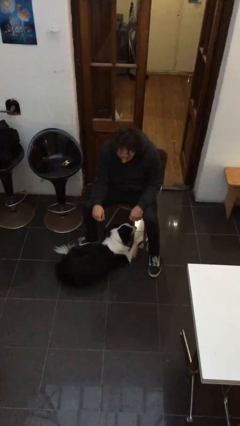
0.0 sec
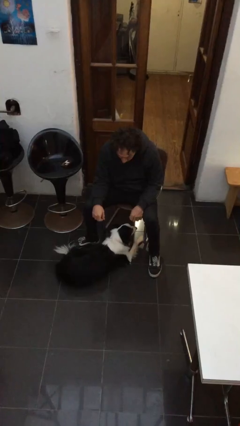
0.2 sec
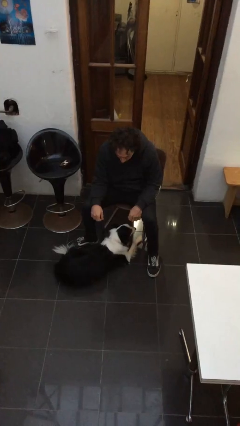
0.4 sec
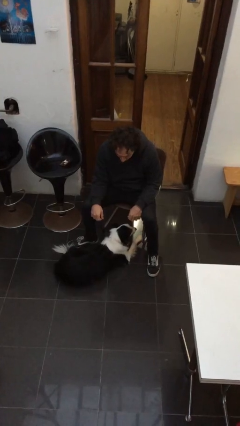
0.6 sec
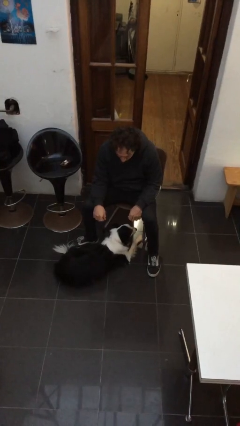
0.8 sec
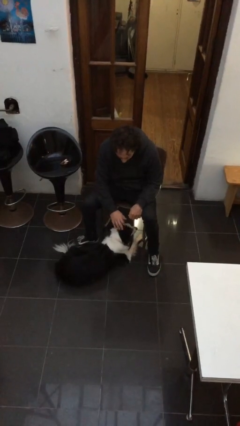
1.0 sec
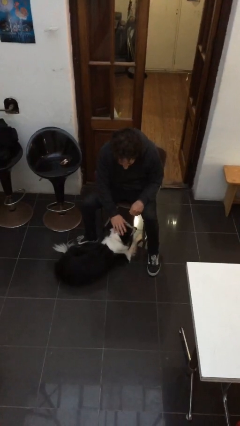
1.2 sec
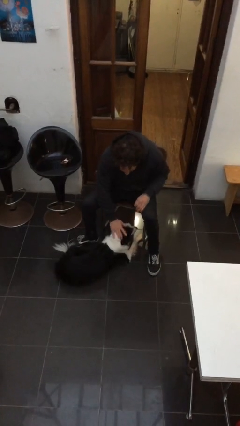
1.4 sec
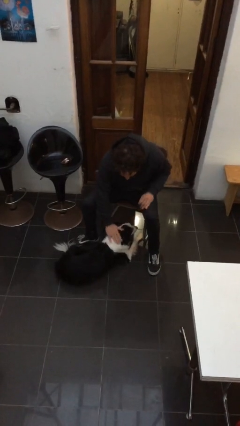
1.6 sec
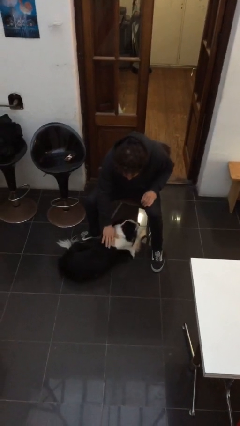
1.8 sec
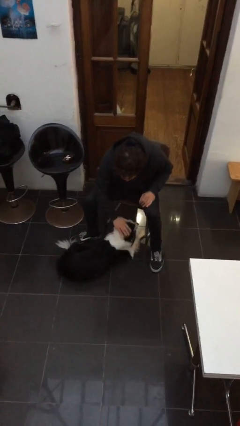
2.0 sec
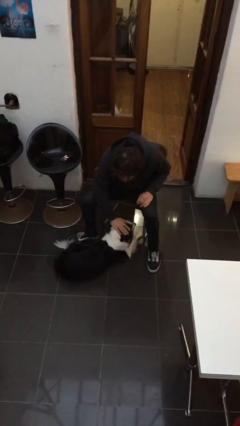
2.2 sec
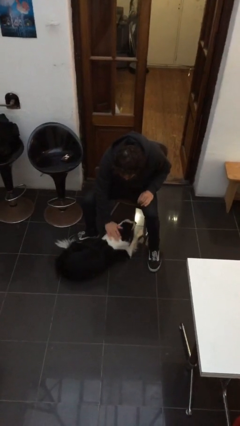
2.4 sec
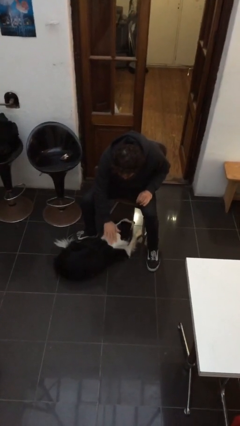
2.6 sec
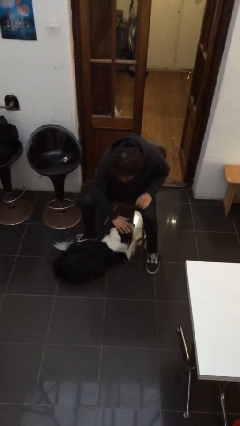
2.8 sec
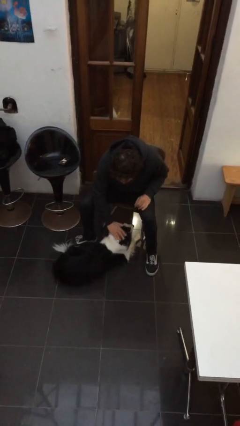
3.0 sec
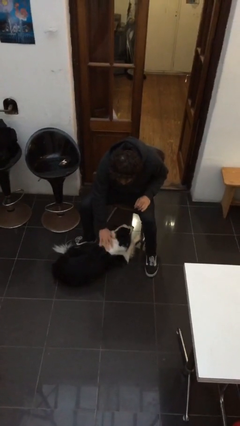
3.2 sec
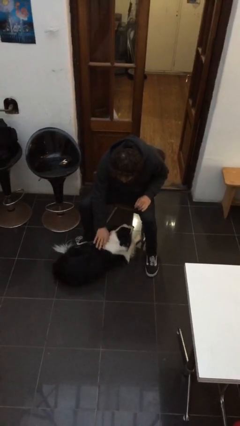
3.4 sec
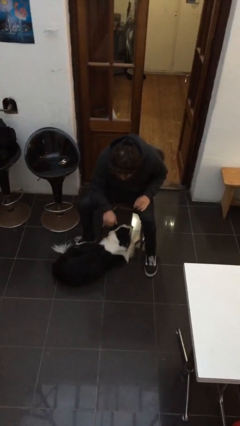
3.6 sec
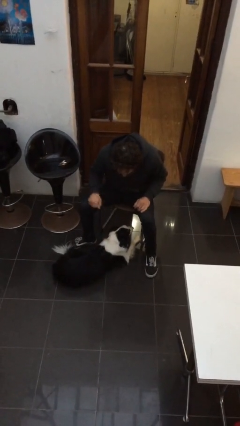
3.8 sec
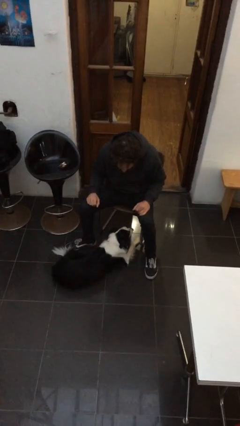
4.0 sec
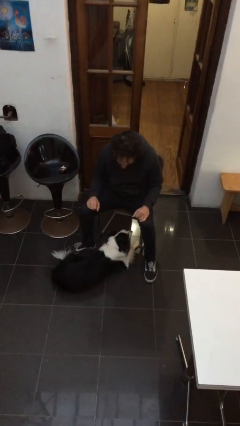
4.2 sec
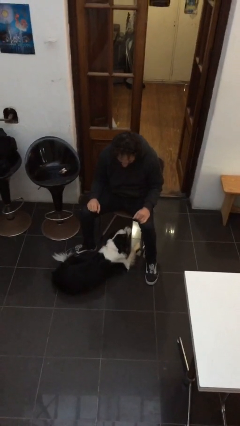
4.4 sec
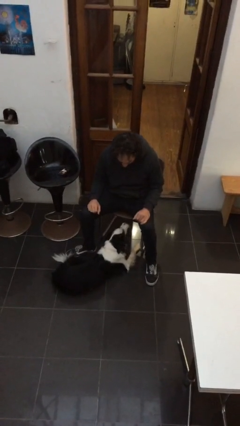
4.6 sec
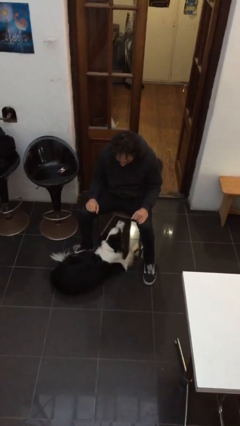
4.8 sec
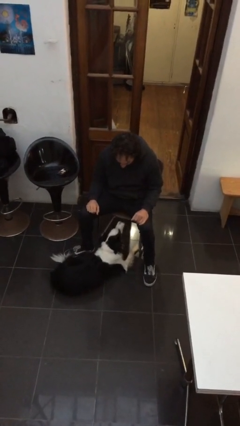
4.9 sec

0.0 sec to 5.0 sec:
person pets dog

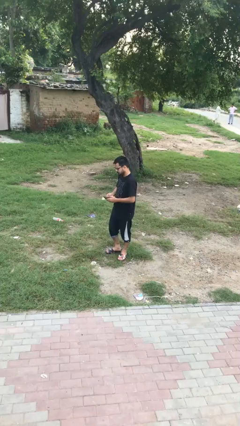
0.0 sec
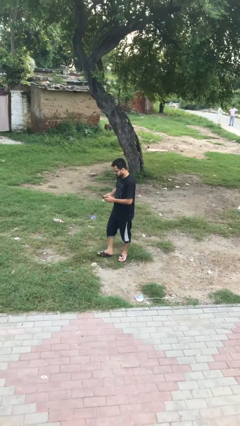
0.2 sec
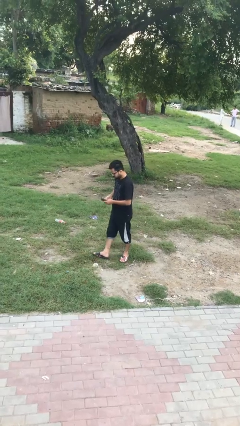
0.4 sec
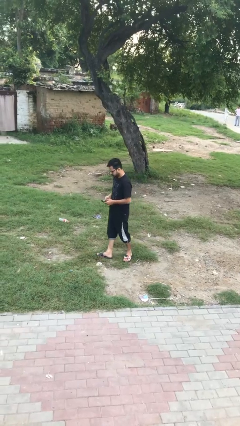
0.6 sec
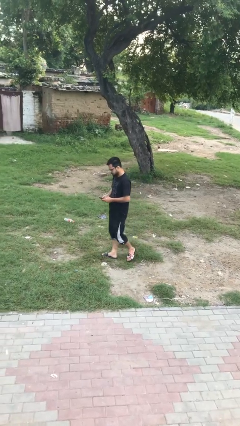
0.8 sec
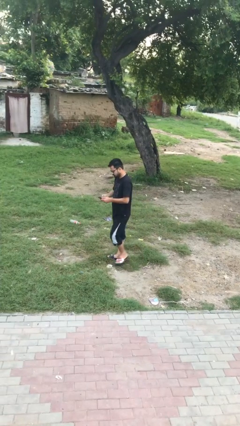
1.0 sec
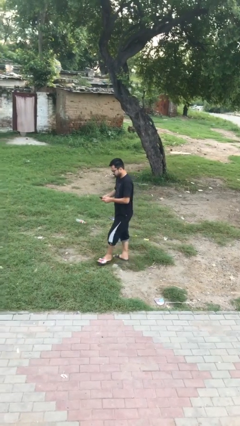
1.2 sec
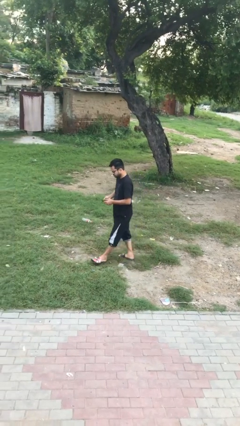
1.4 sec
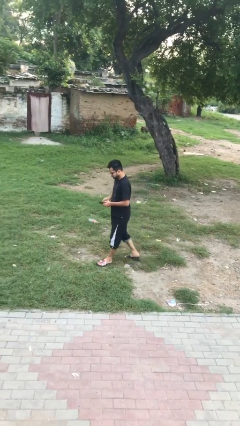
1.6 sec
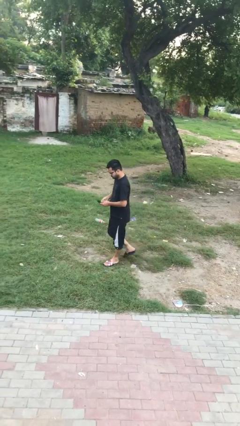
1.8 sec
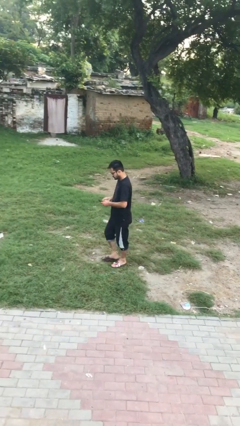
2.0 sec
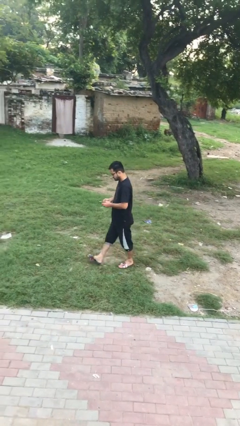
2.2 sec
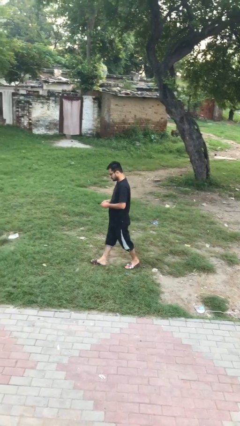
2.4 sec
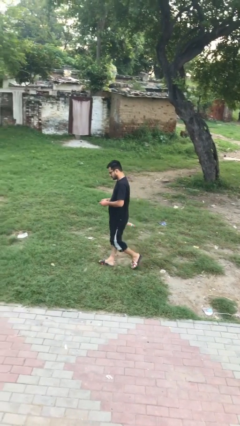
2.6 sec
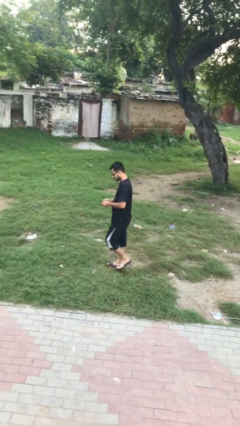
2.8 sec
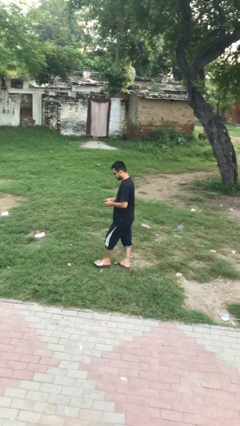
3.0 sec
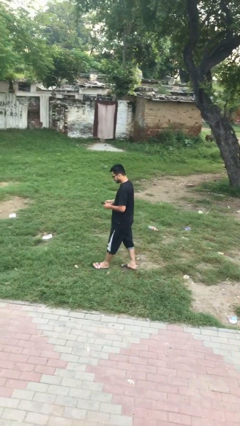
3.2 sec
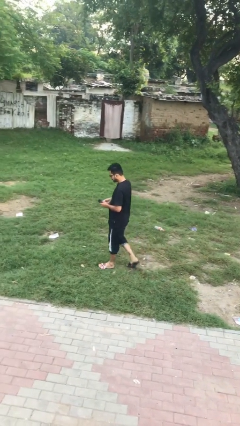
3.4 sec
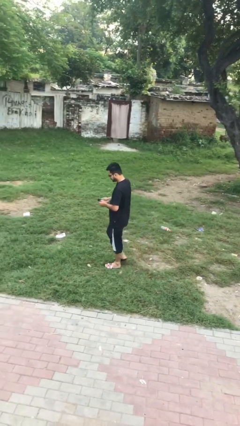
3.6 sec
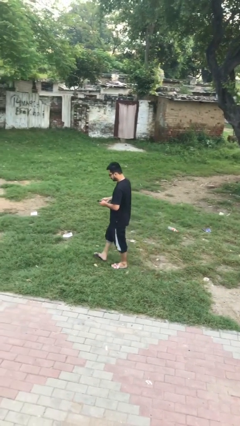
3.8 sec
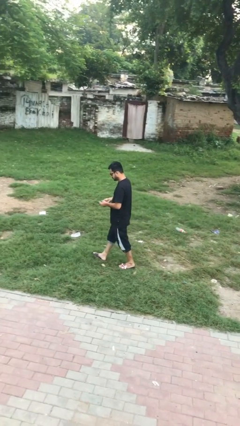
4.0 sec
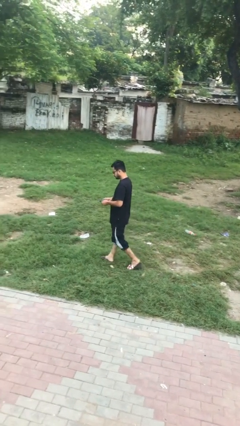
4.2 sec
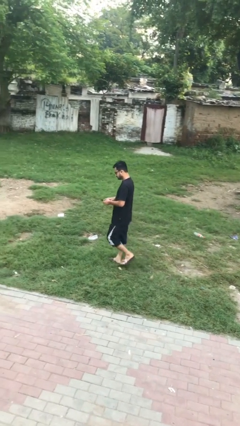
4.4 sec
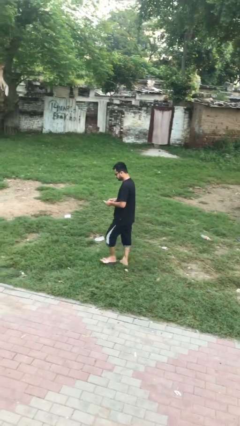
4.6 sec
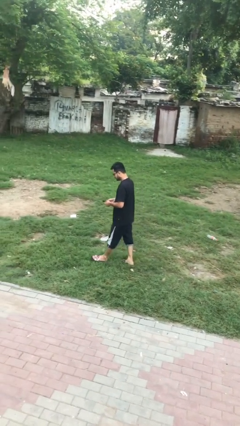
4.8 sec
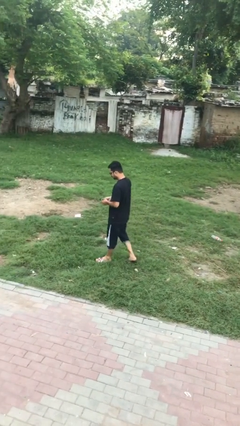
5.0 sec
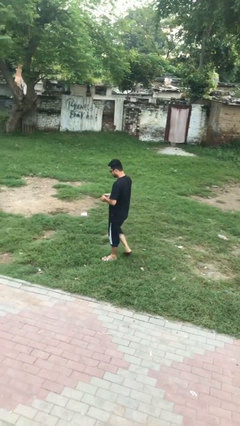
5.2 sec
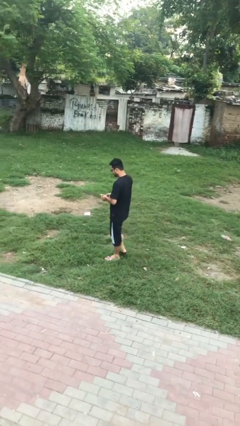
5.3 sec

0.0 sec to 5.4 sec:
person texts on phone

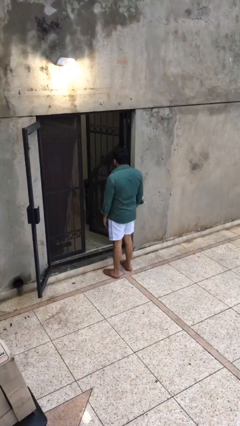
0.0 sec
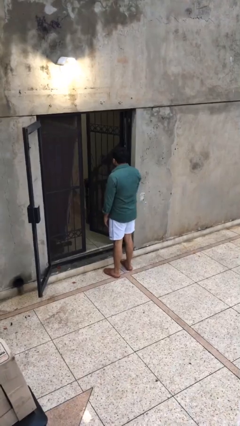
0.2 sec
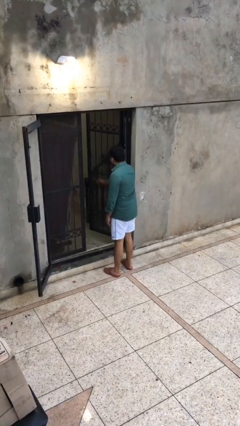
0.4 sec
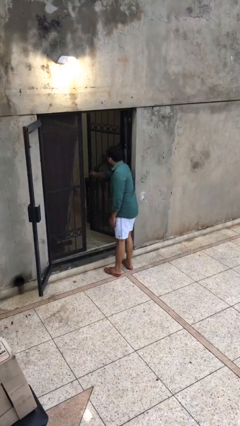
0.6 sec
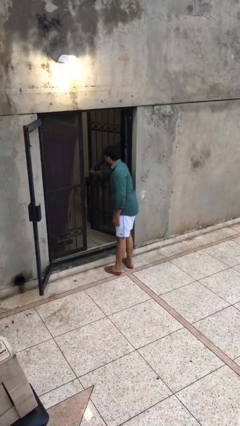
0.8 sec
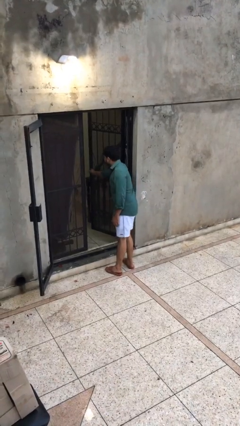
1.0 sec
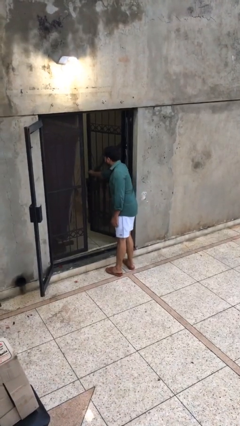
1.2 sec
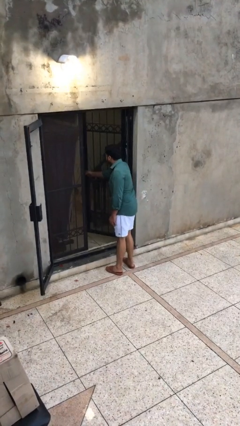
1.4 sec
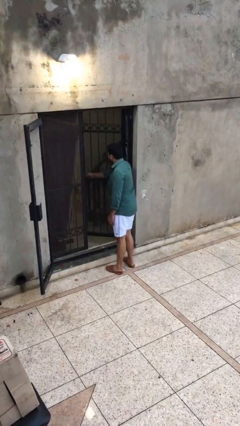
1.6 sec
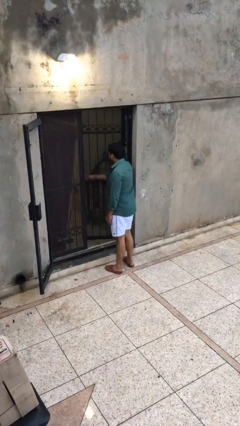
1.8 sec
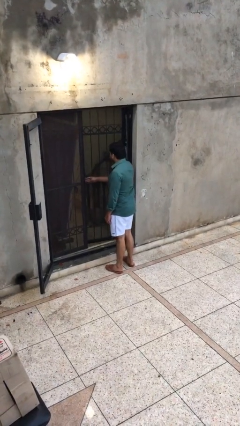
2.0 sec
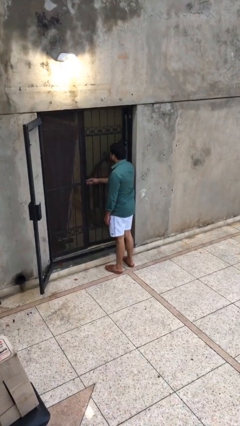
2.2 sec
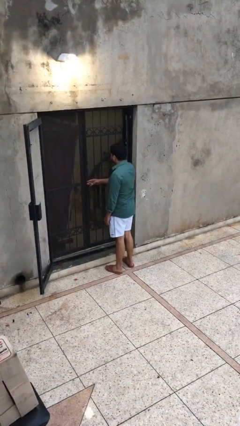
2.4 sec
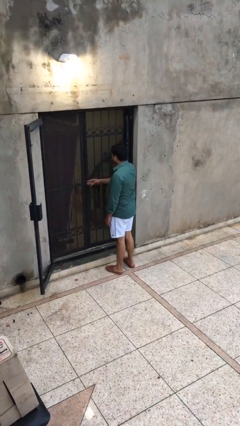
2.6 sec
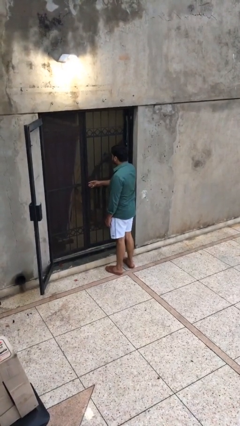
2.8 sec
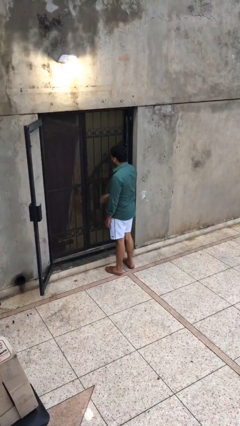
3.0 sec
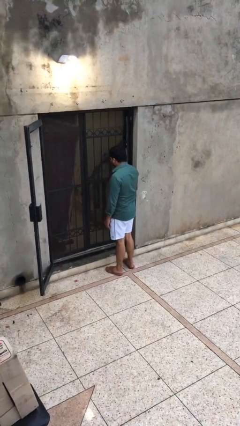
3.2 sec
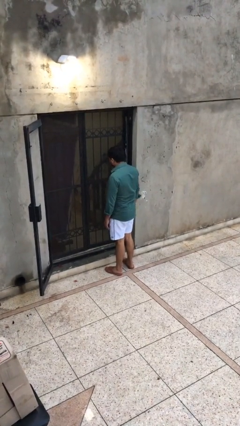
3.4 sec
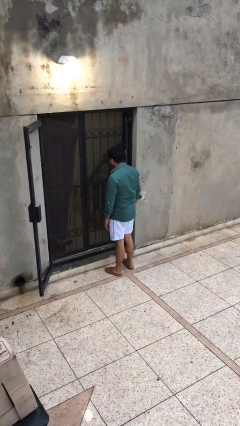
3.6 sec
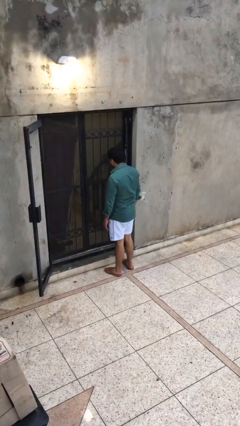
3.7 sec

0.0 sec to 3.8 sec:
person closes facility door

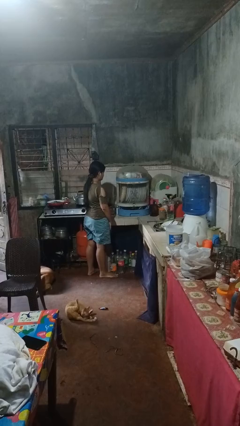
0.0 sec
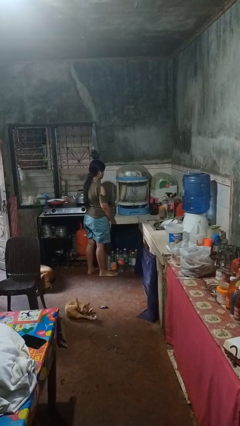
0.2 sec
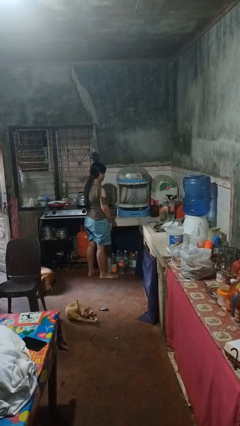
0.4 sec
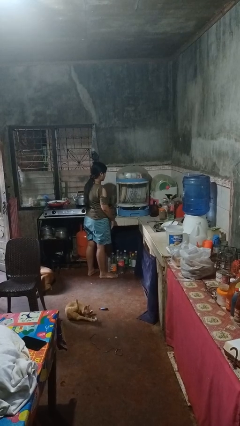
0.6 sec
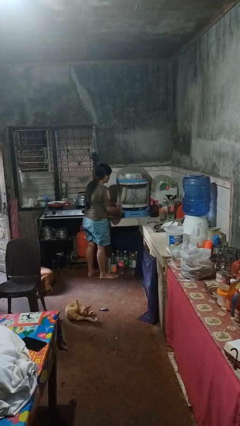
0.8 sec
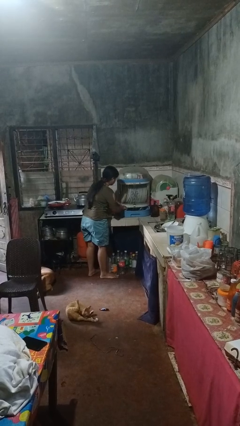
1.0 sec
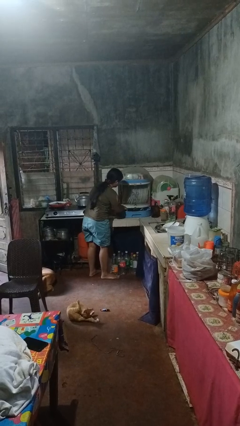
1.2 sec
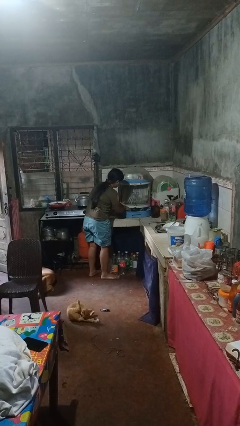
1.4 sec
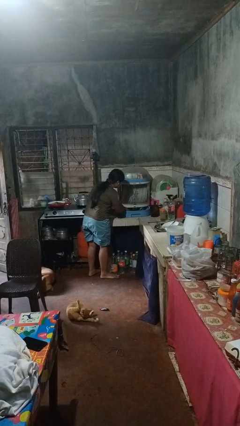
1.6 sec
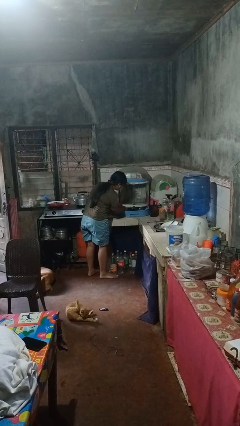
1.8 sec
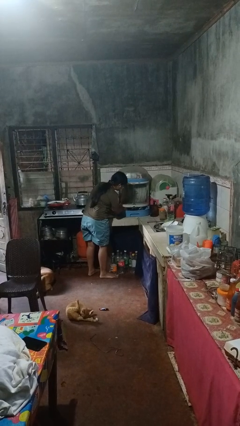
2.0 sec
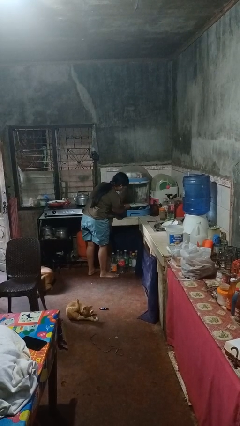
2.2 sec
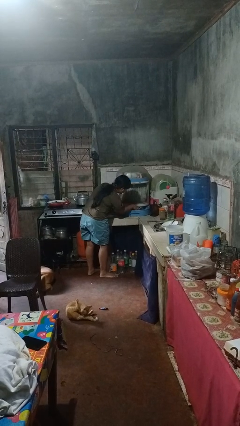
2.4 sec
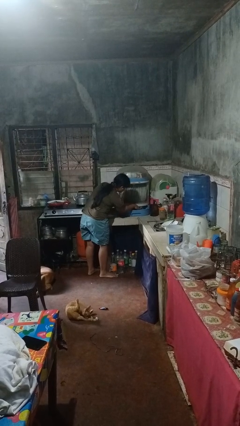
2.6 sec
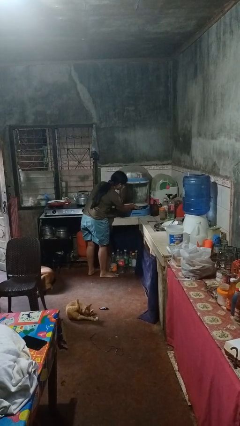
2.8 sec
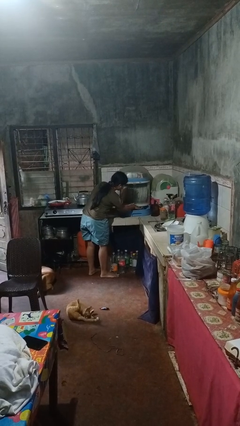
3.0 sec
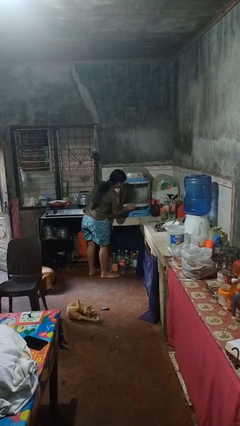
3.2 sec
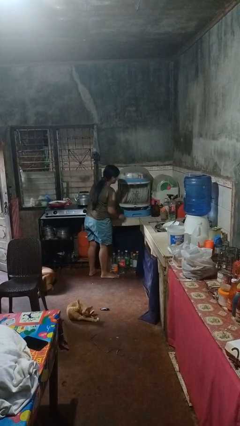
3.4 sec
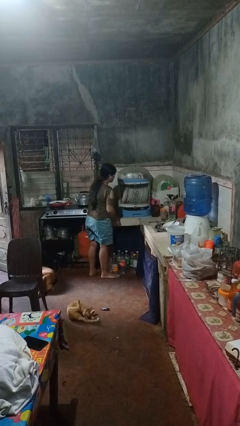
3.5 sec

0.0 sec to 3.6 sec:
person searches in kitchen drawer
